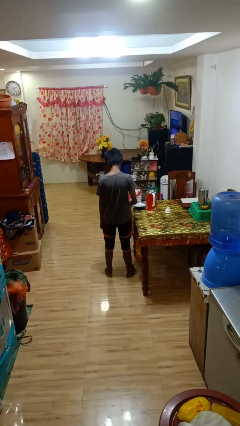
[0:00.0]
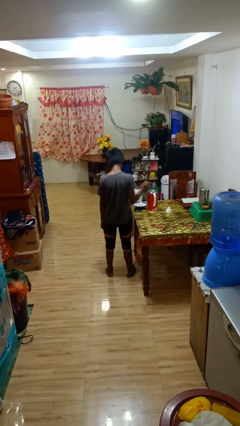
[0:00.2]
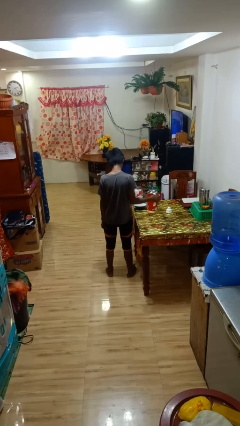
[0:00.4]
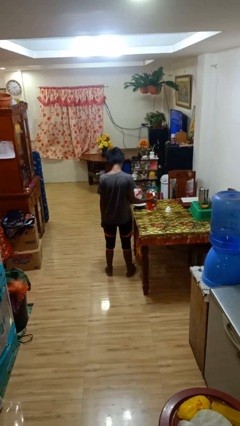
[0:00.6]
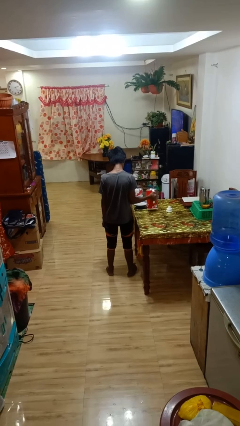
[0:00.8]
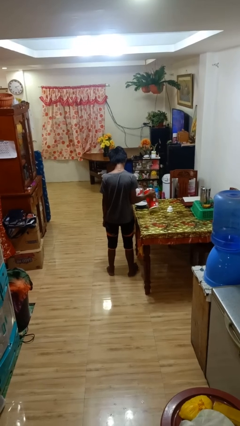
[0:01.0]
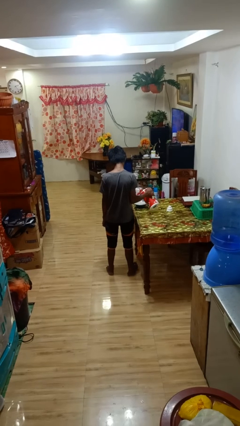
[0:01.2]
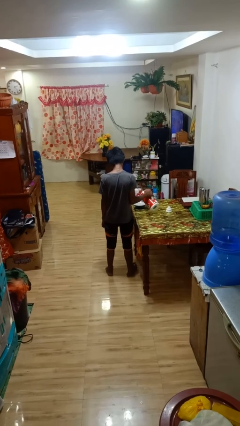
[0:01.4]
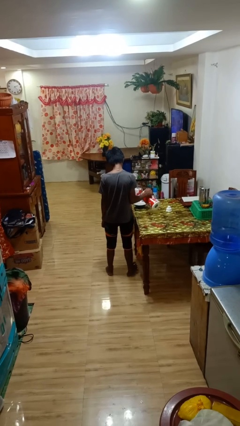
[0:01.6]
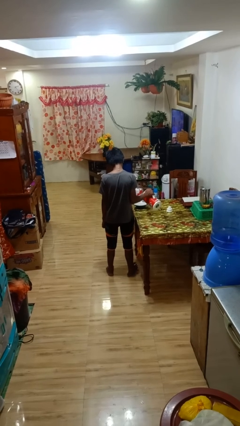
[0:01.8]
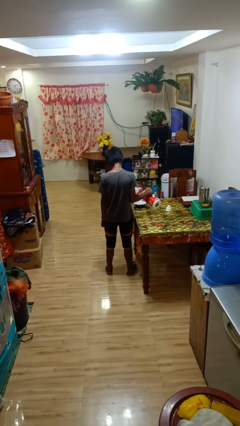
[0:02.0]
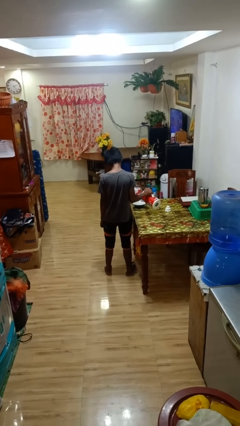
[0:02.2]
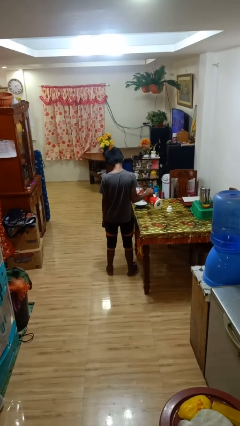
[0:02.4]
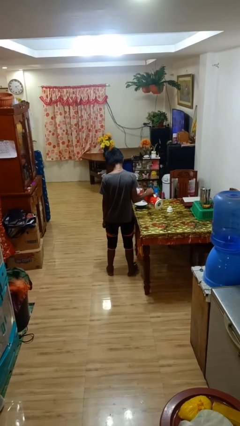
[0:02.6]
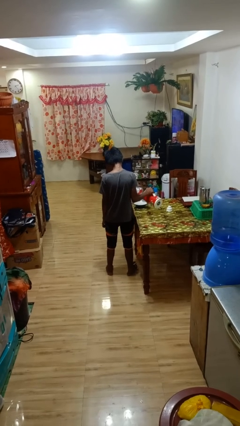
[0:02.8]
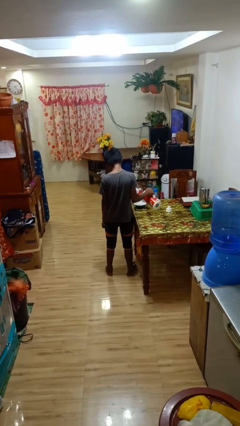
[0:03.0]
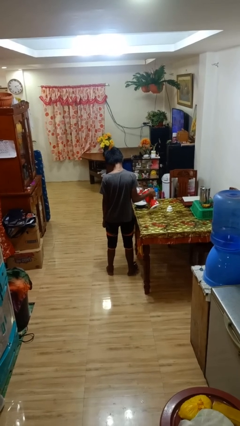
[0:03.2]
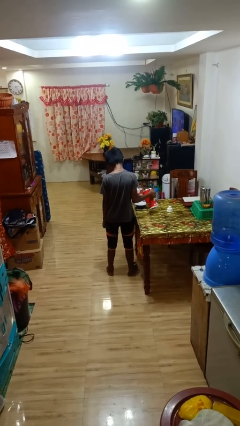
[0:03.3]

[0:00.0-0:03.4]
person pours into bowl

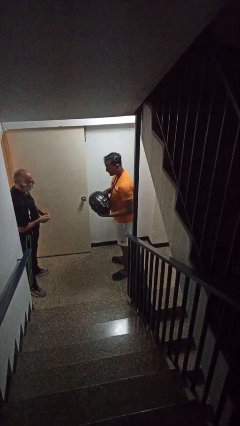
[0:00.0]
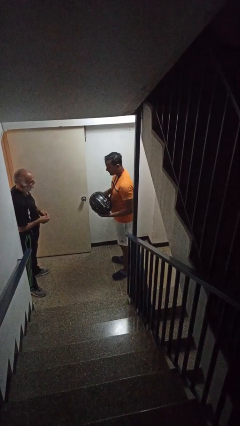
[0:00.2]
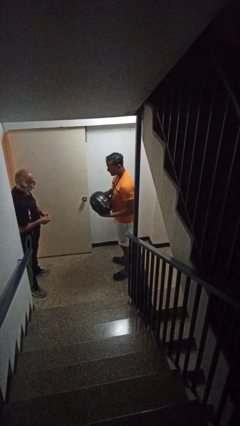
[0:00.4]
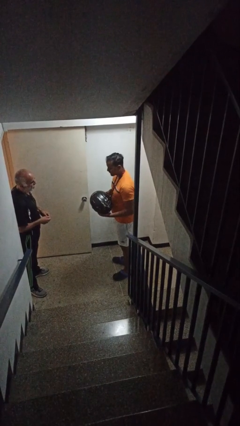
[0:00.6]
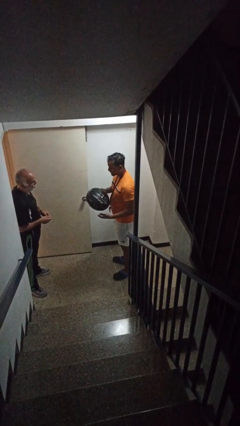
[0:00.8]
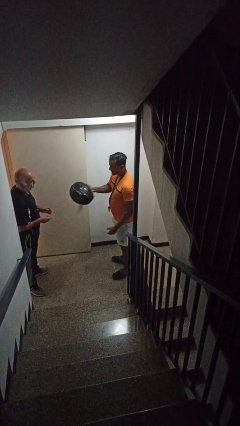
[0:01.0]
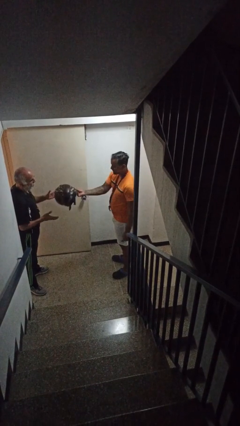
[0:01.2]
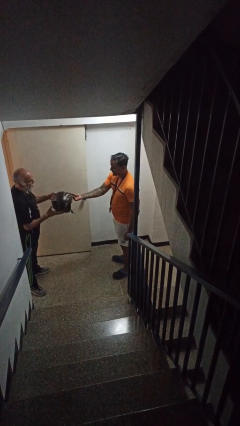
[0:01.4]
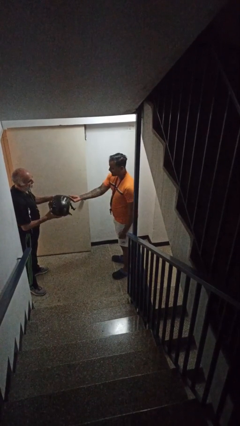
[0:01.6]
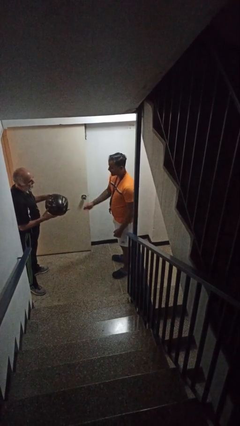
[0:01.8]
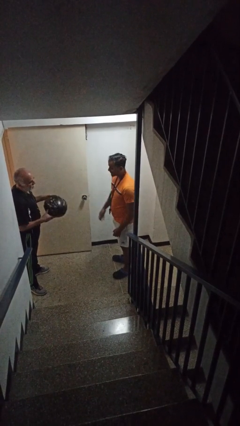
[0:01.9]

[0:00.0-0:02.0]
person transfers object to person

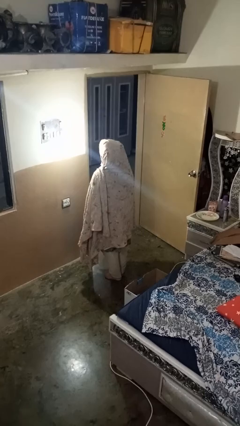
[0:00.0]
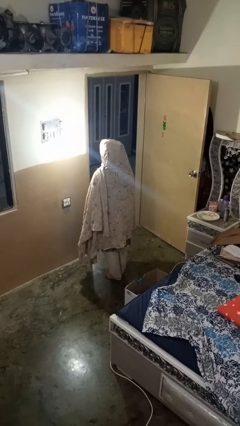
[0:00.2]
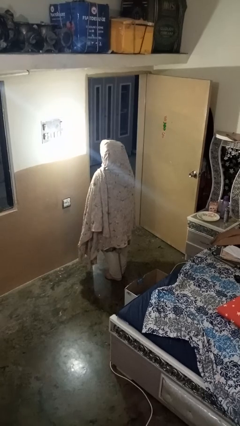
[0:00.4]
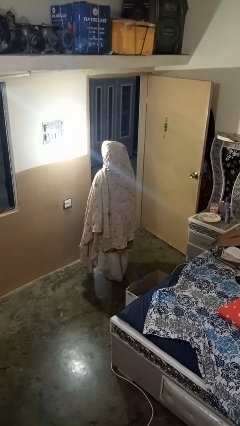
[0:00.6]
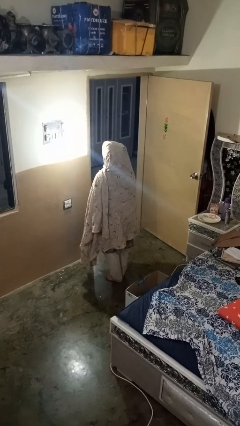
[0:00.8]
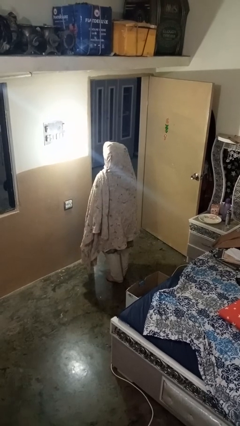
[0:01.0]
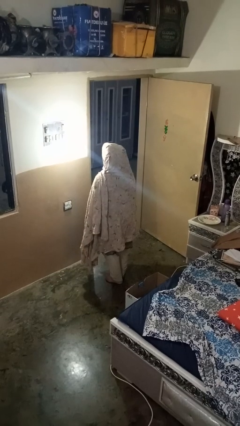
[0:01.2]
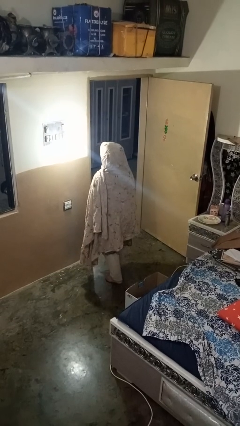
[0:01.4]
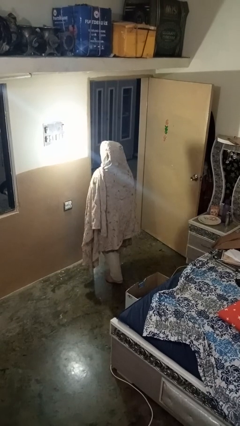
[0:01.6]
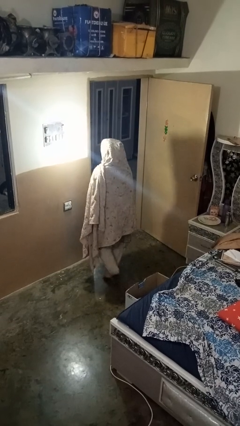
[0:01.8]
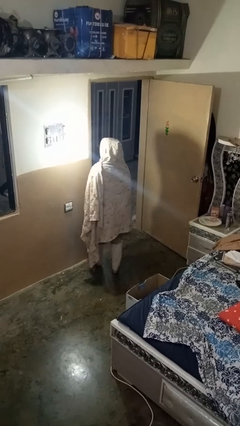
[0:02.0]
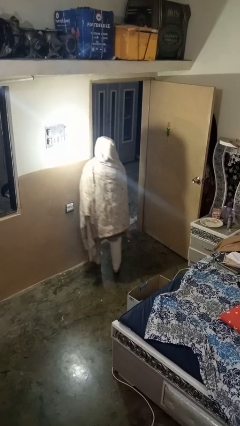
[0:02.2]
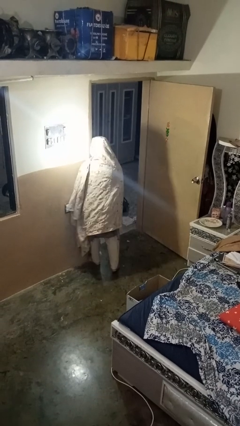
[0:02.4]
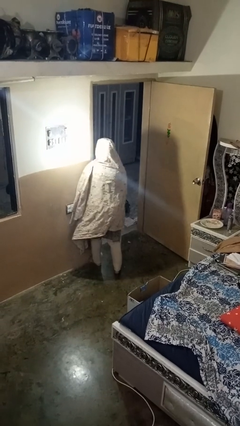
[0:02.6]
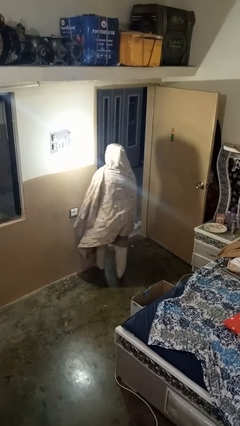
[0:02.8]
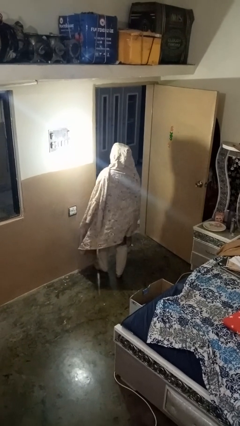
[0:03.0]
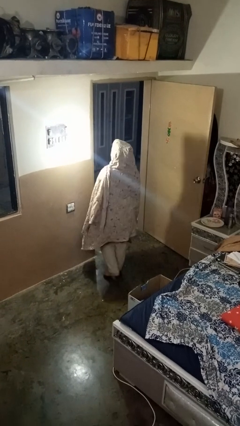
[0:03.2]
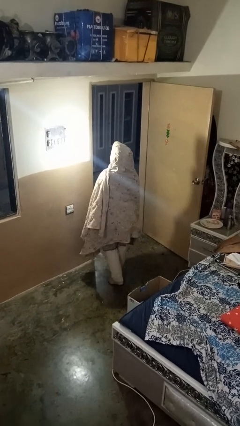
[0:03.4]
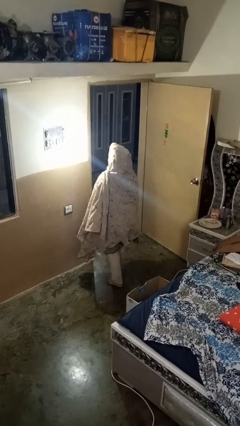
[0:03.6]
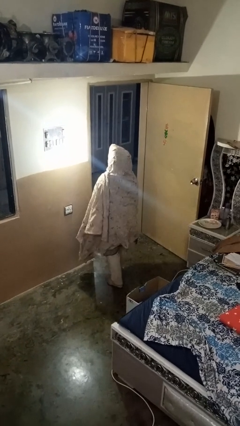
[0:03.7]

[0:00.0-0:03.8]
person bumps into wall

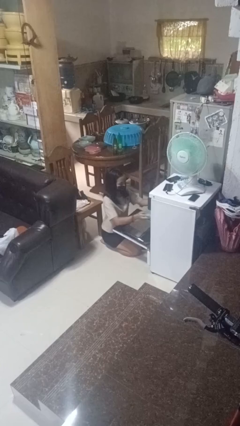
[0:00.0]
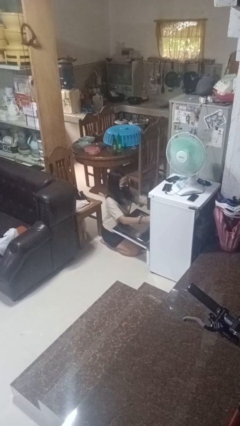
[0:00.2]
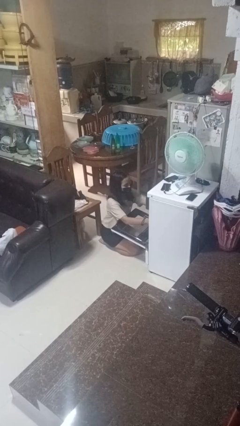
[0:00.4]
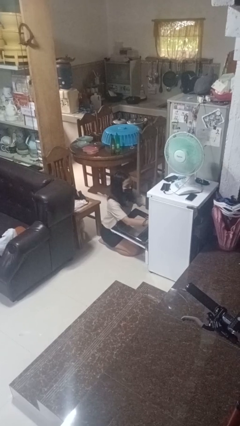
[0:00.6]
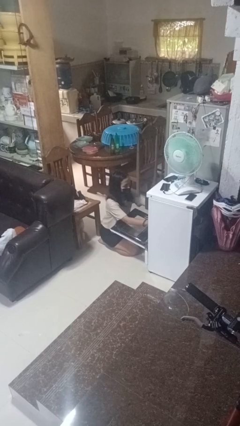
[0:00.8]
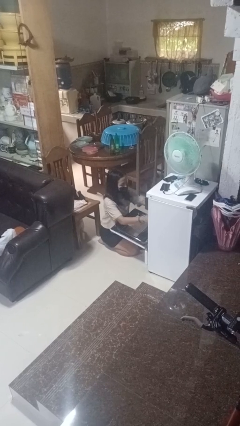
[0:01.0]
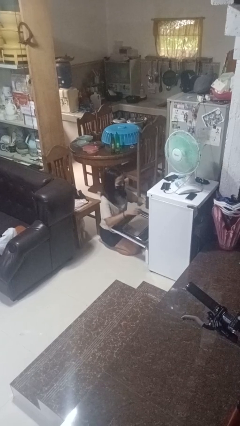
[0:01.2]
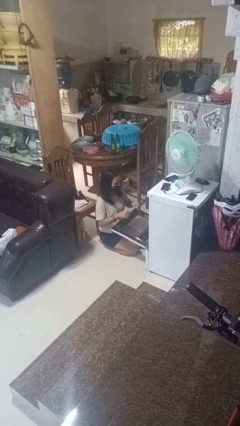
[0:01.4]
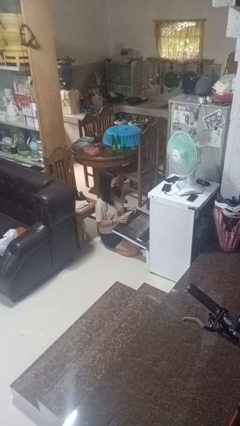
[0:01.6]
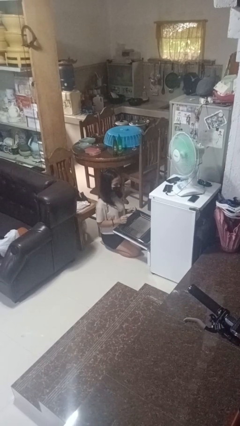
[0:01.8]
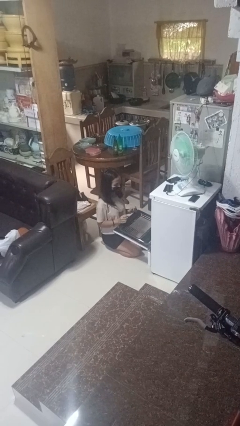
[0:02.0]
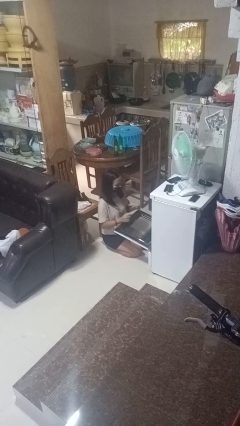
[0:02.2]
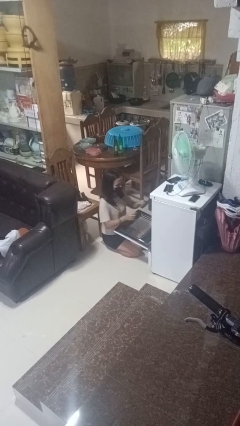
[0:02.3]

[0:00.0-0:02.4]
person puts object into oven

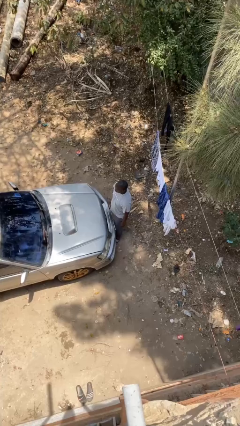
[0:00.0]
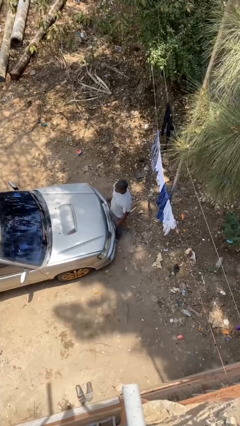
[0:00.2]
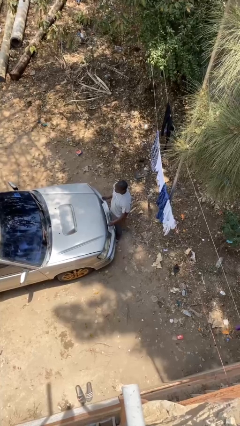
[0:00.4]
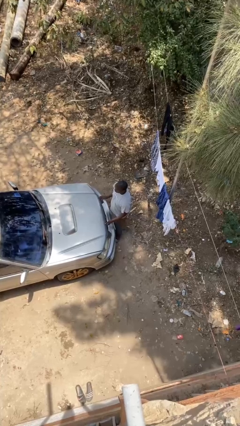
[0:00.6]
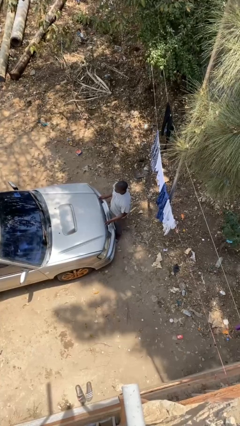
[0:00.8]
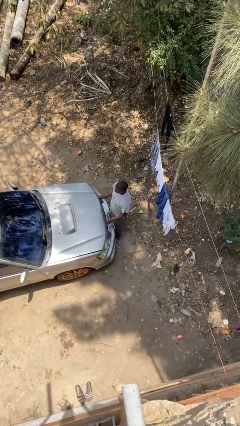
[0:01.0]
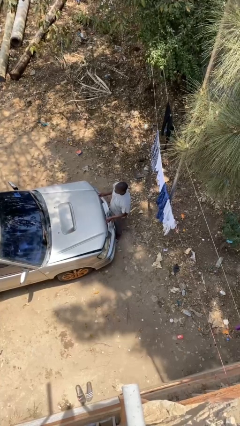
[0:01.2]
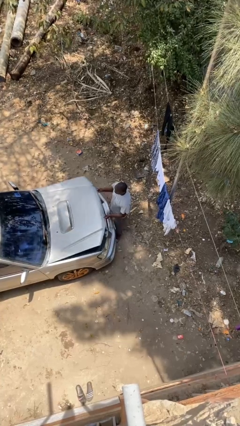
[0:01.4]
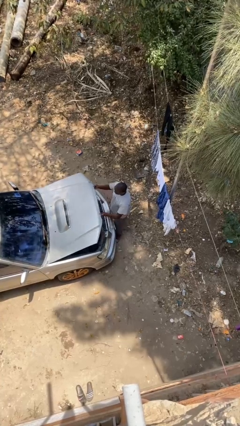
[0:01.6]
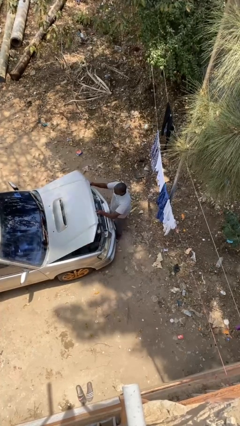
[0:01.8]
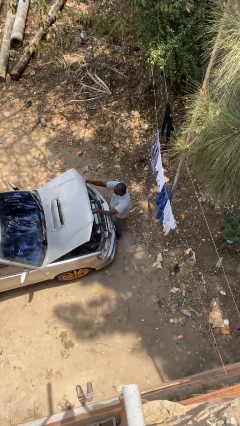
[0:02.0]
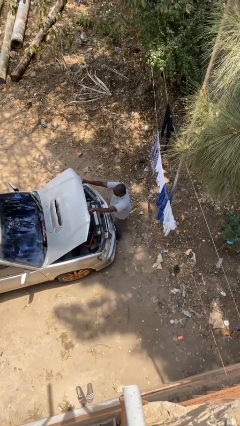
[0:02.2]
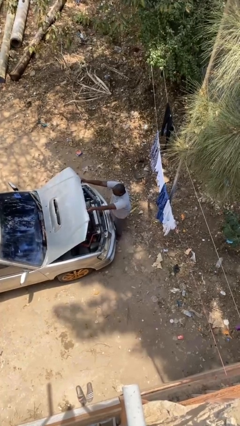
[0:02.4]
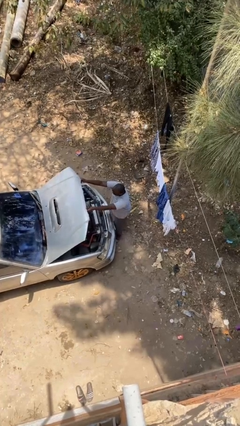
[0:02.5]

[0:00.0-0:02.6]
person opens car hood

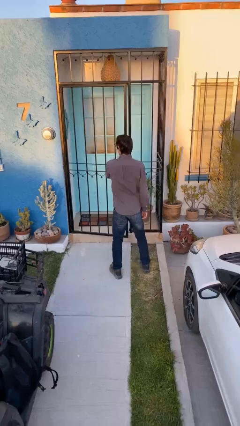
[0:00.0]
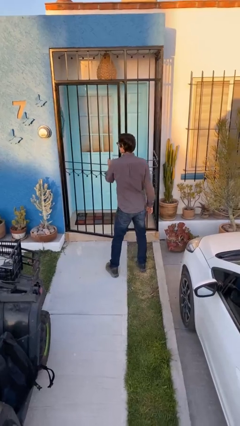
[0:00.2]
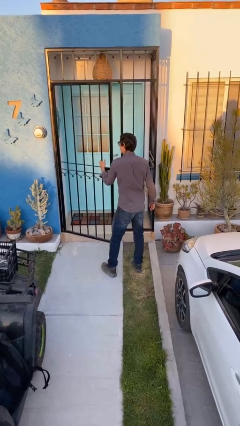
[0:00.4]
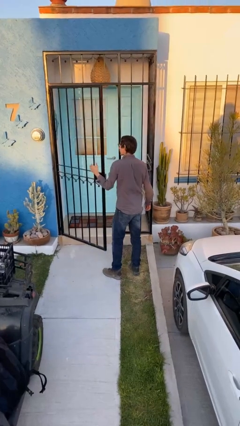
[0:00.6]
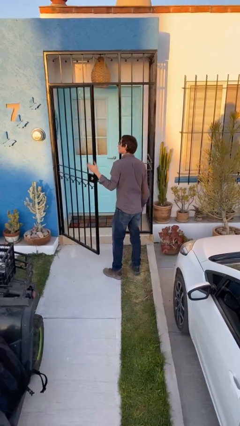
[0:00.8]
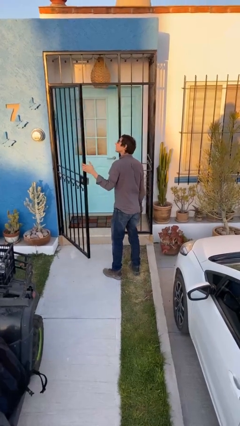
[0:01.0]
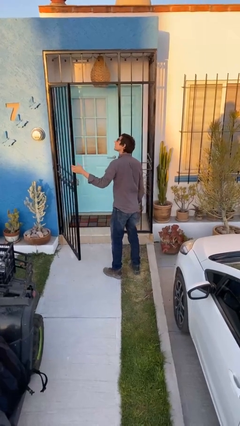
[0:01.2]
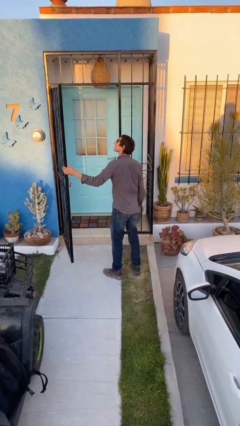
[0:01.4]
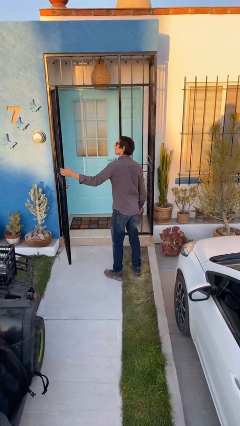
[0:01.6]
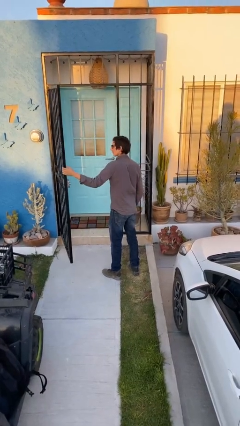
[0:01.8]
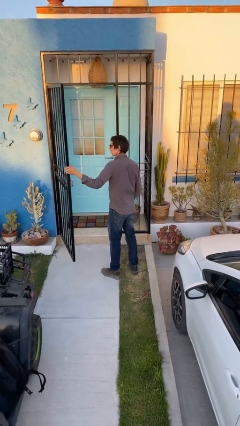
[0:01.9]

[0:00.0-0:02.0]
person opens facility door

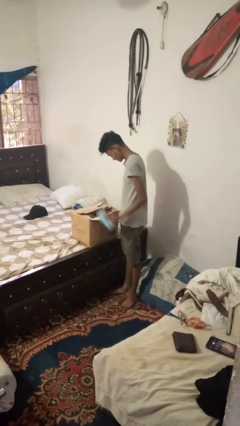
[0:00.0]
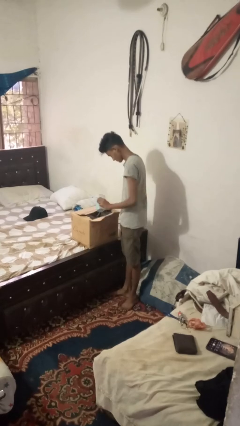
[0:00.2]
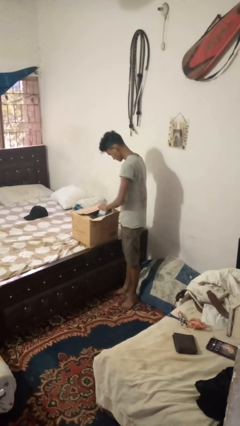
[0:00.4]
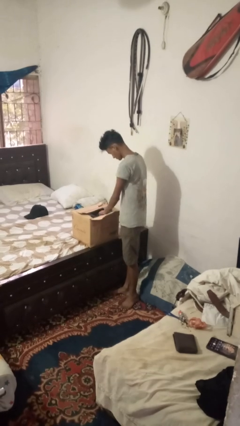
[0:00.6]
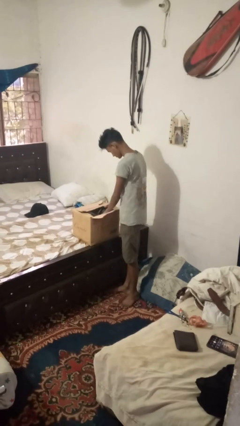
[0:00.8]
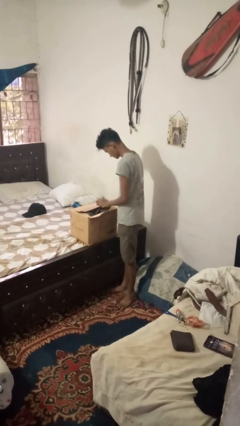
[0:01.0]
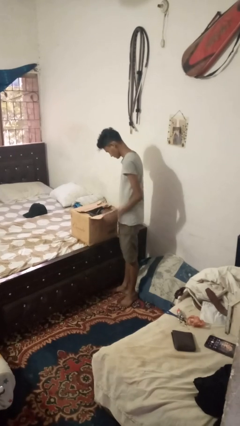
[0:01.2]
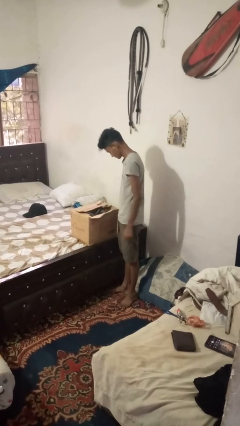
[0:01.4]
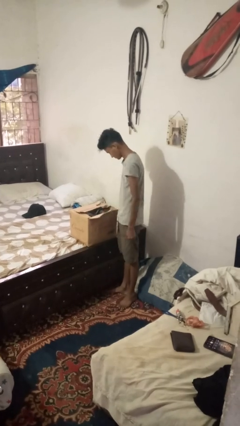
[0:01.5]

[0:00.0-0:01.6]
person puts object into box
